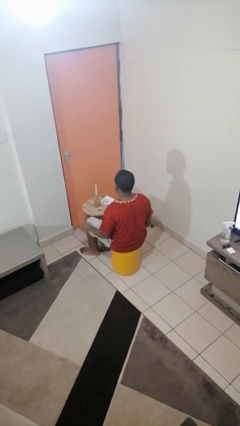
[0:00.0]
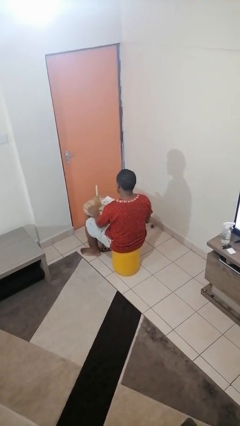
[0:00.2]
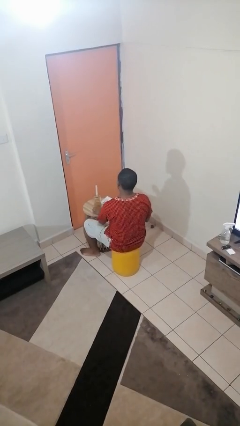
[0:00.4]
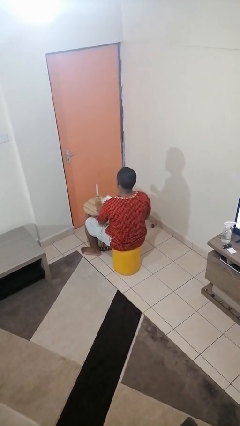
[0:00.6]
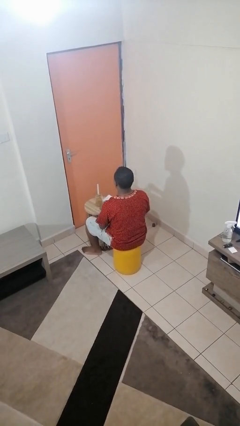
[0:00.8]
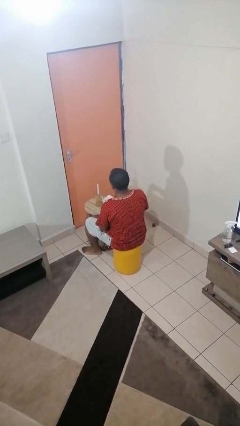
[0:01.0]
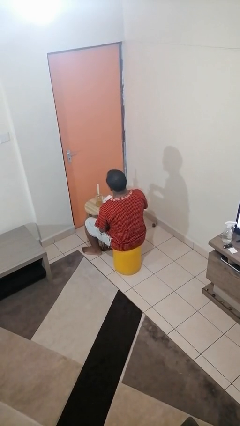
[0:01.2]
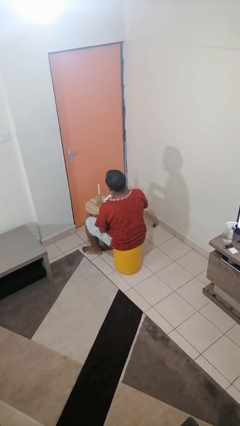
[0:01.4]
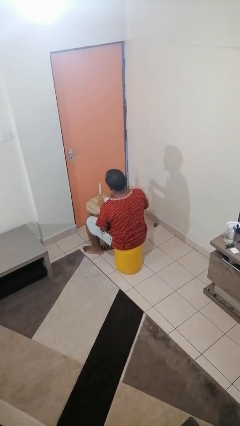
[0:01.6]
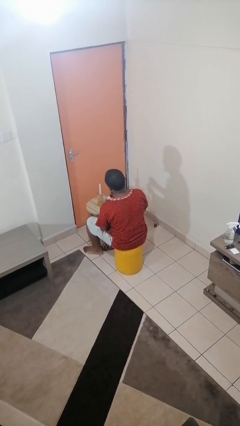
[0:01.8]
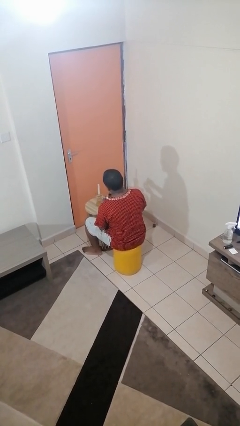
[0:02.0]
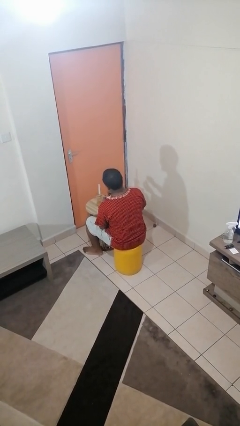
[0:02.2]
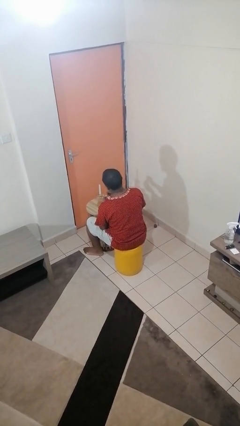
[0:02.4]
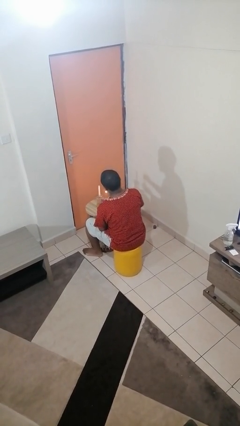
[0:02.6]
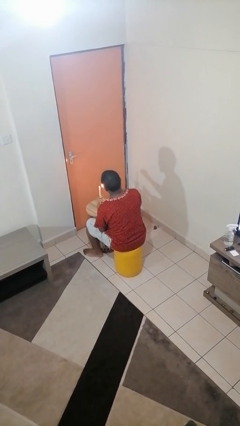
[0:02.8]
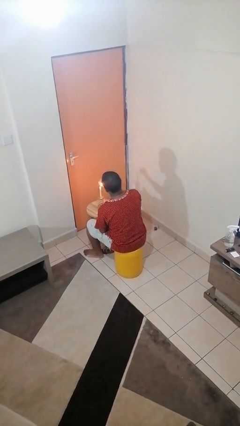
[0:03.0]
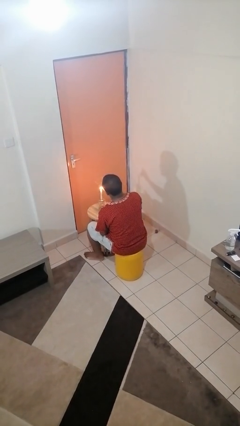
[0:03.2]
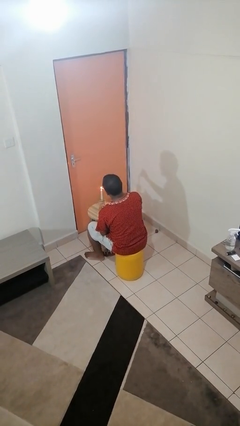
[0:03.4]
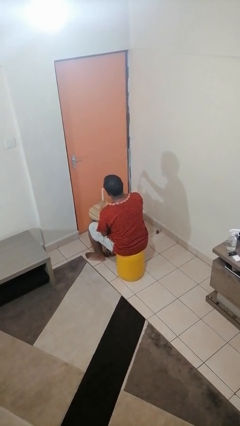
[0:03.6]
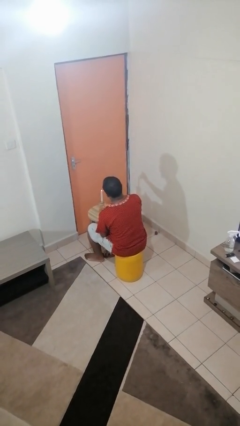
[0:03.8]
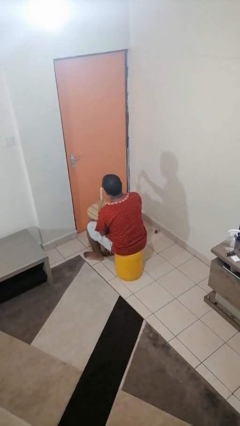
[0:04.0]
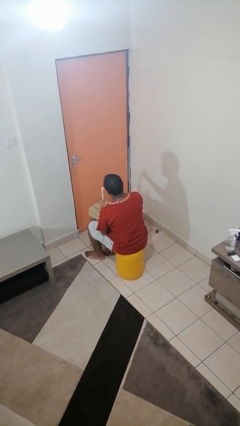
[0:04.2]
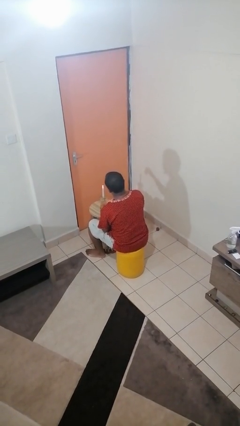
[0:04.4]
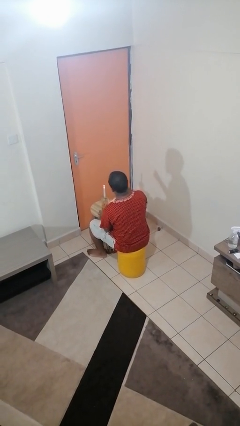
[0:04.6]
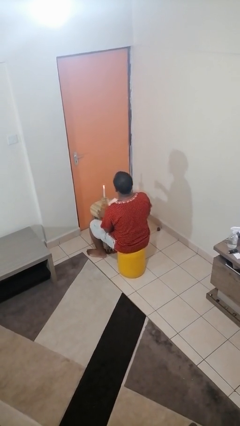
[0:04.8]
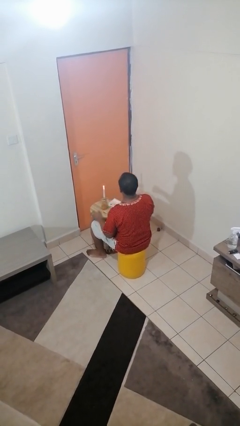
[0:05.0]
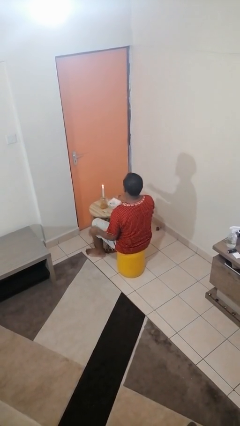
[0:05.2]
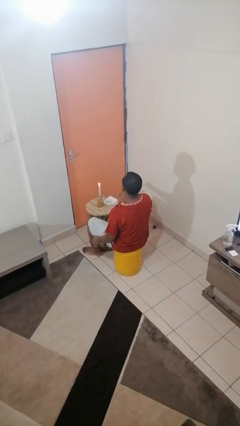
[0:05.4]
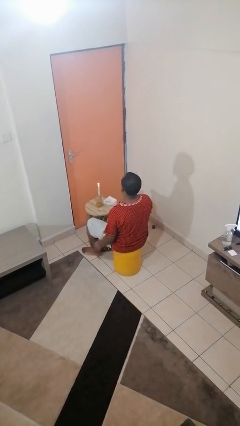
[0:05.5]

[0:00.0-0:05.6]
person lights candle

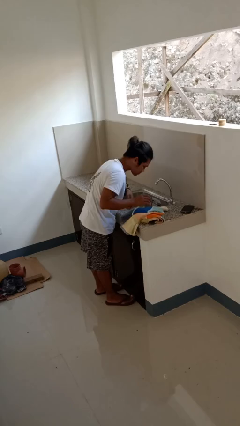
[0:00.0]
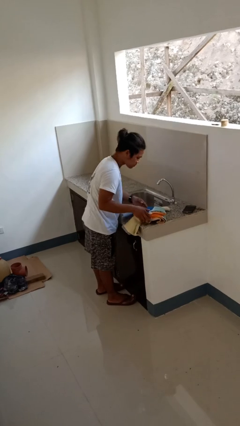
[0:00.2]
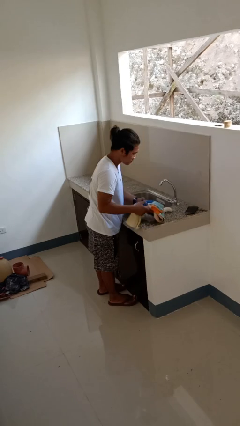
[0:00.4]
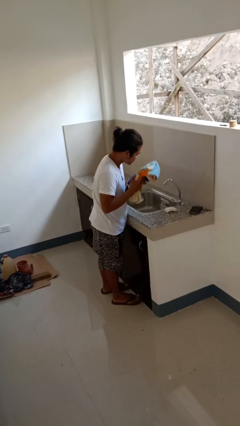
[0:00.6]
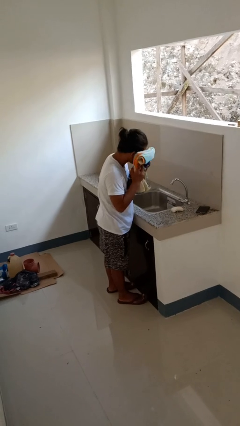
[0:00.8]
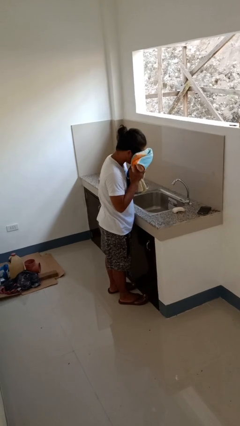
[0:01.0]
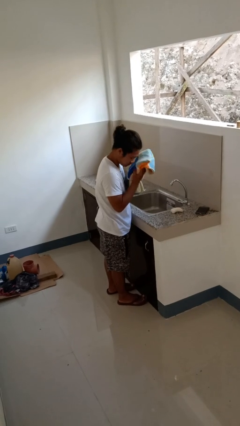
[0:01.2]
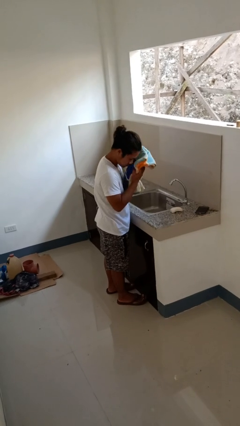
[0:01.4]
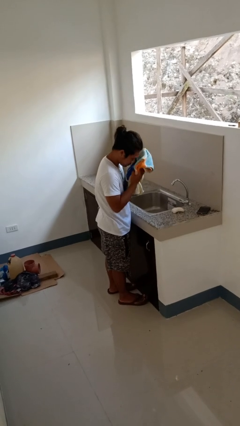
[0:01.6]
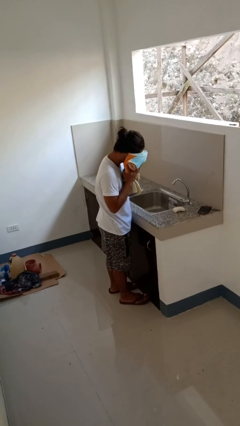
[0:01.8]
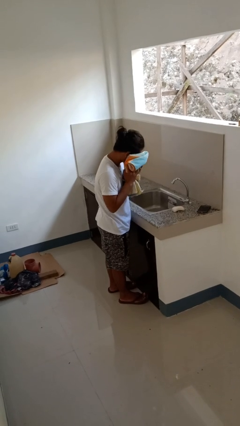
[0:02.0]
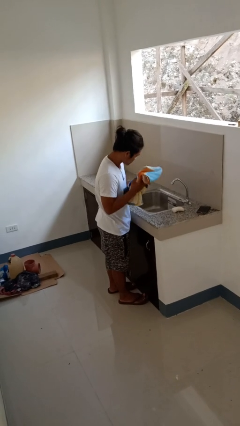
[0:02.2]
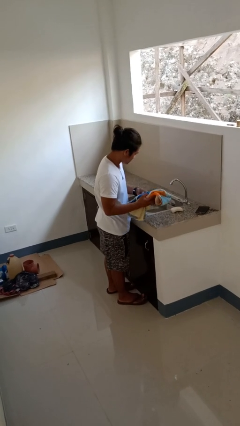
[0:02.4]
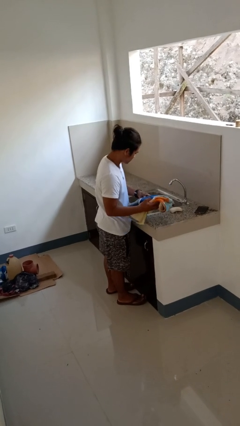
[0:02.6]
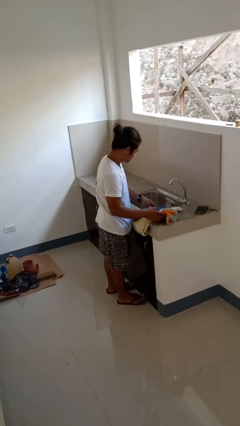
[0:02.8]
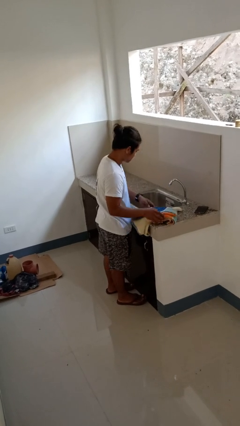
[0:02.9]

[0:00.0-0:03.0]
person dries face with towel

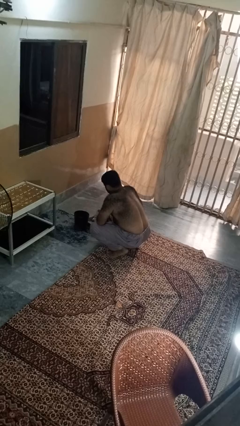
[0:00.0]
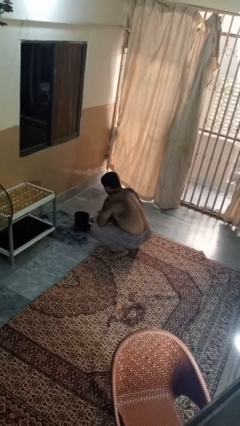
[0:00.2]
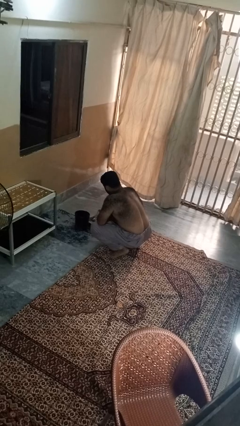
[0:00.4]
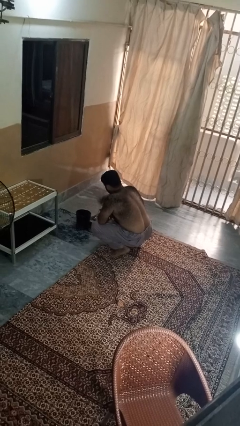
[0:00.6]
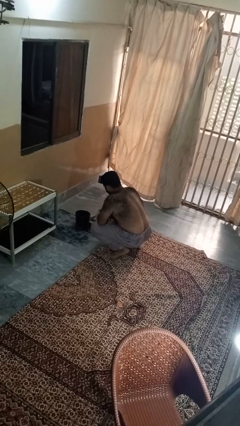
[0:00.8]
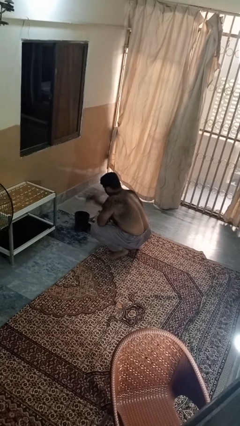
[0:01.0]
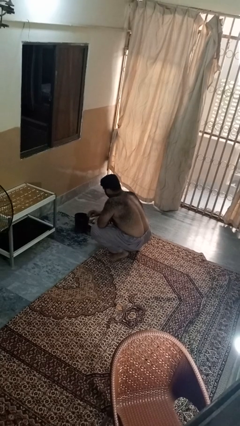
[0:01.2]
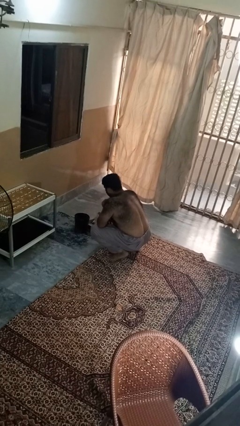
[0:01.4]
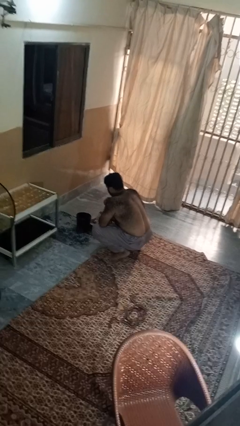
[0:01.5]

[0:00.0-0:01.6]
person discards trash

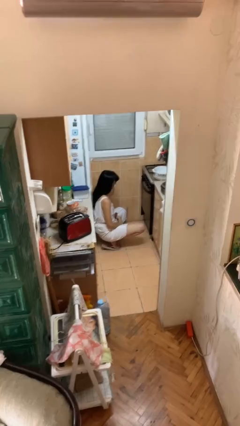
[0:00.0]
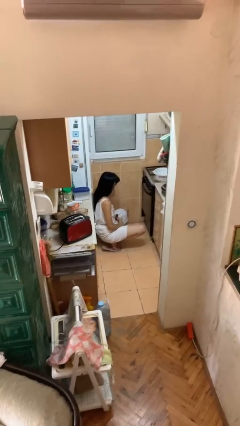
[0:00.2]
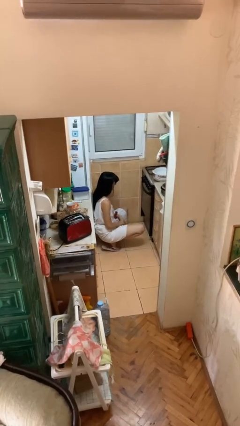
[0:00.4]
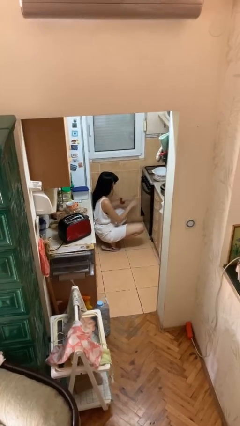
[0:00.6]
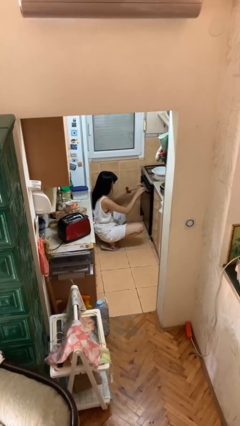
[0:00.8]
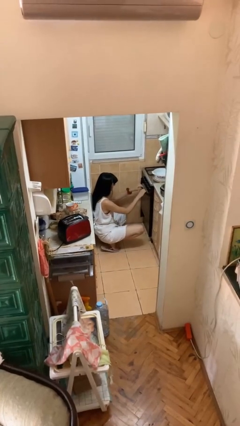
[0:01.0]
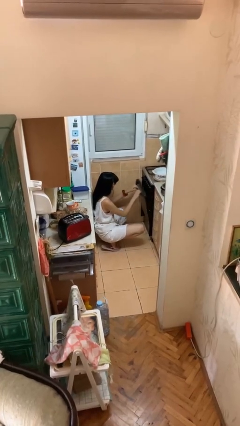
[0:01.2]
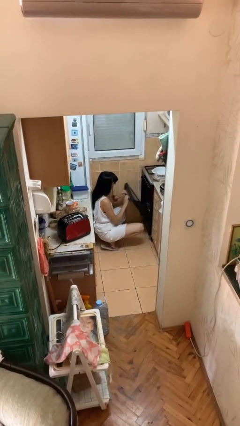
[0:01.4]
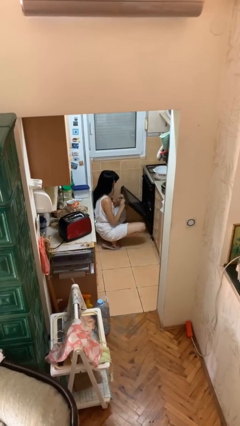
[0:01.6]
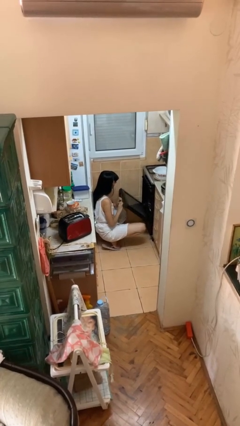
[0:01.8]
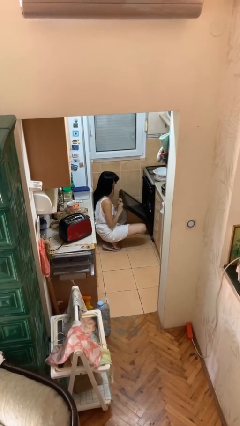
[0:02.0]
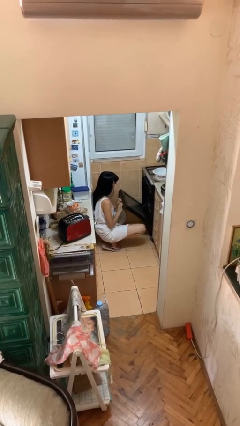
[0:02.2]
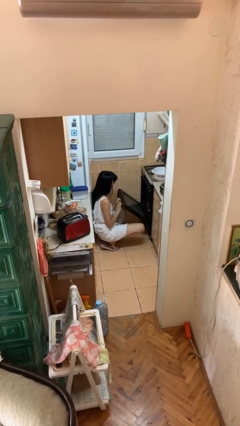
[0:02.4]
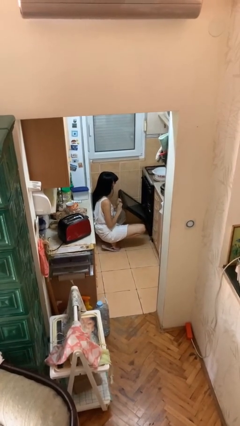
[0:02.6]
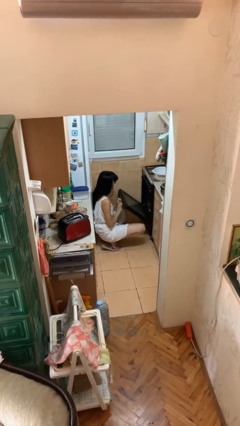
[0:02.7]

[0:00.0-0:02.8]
person opens oven door

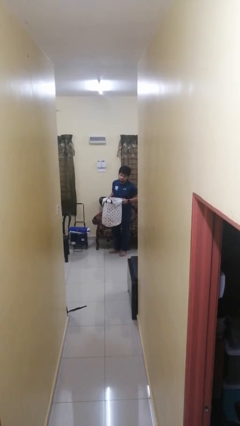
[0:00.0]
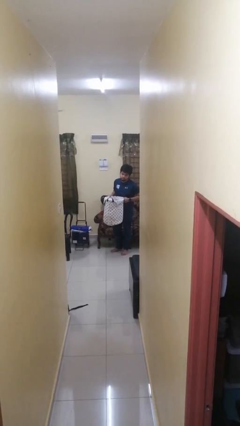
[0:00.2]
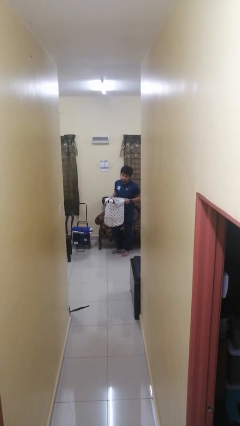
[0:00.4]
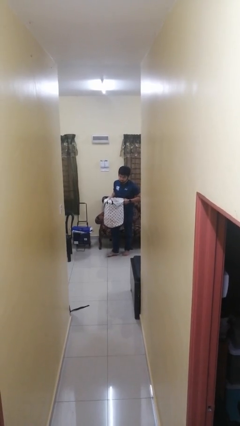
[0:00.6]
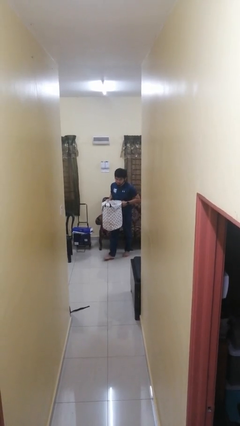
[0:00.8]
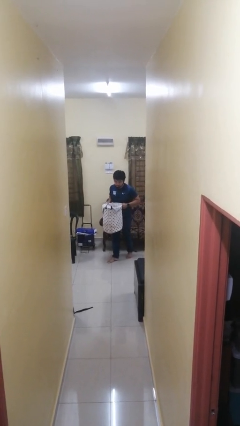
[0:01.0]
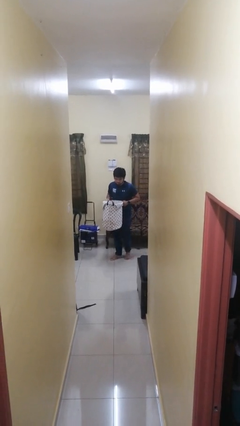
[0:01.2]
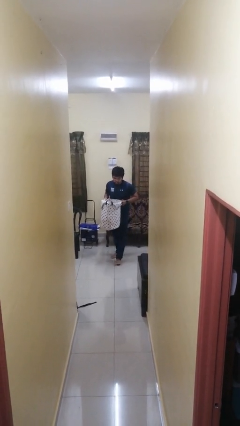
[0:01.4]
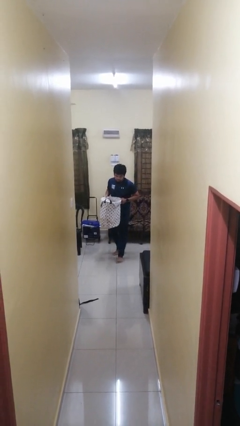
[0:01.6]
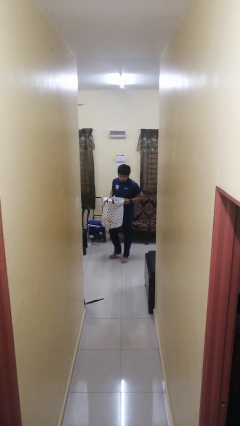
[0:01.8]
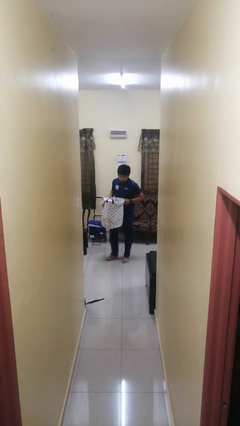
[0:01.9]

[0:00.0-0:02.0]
person carries laundry basket

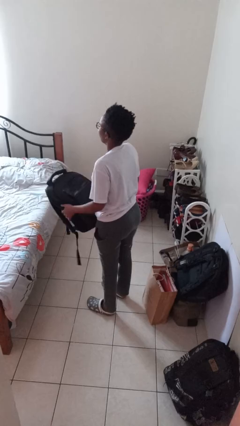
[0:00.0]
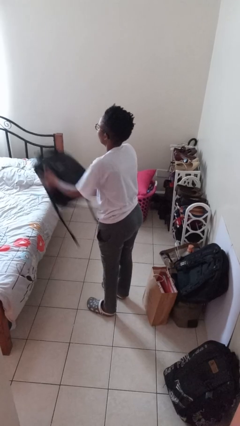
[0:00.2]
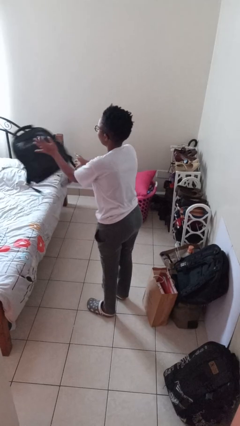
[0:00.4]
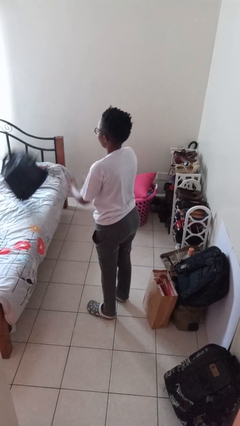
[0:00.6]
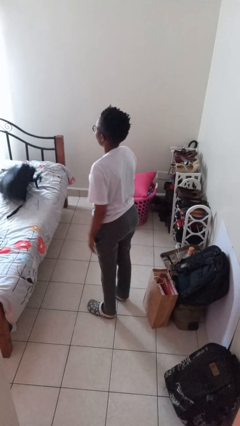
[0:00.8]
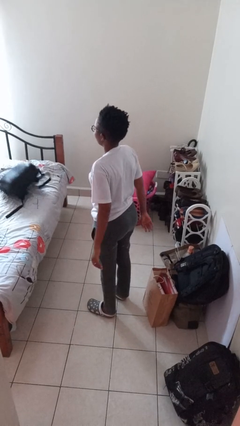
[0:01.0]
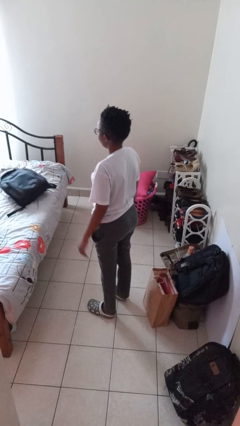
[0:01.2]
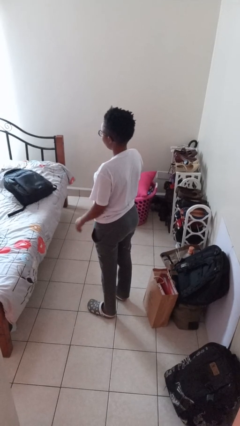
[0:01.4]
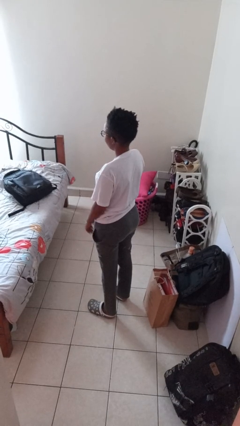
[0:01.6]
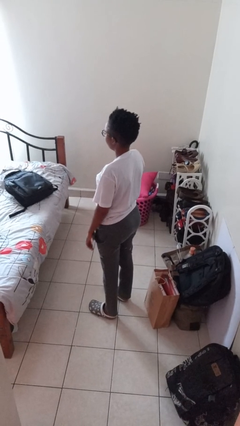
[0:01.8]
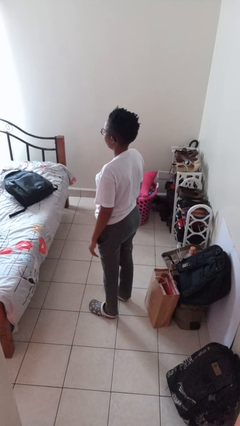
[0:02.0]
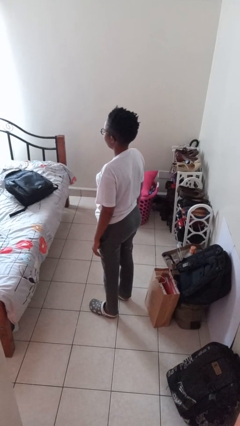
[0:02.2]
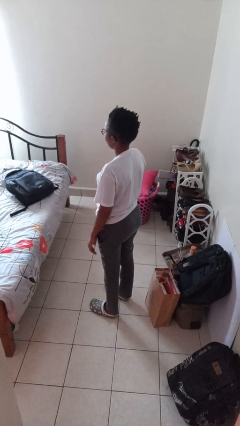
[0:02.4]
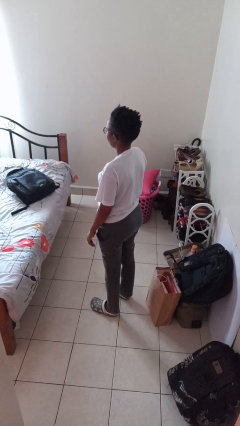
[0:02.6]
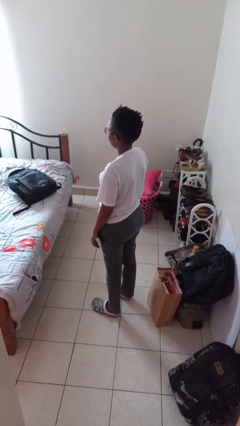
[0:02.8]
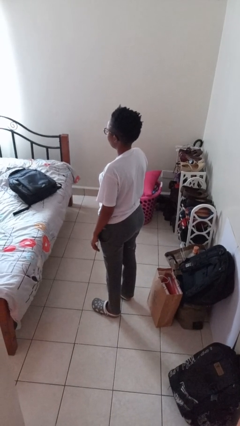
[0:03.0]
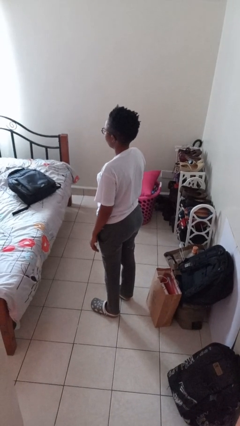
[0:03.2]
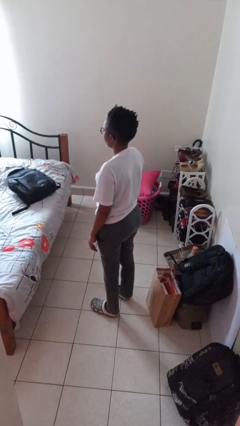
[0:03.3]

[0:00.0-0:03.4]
person throws object on bed
